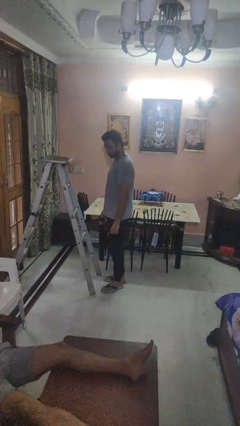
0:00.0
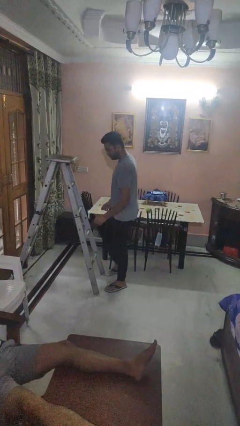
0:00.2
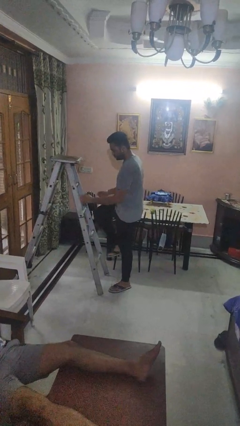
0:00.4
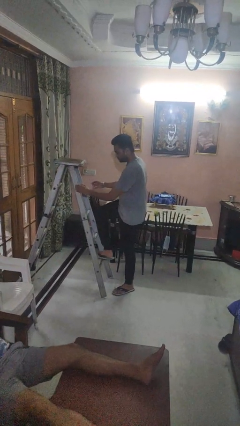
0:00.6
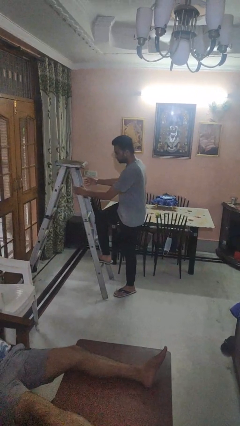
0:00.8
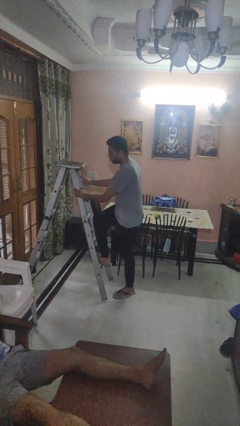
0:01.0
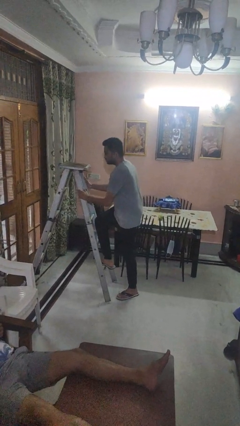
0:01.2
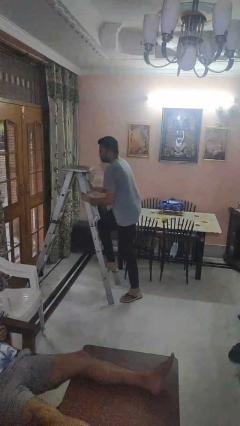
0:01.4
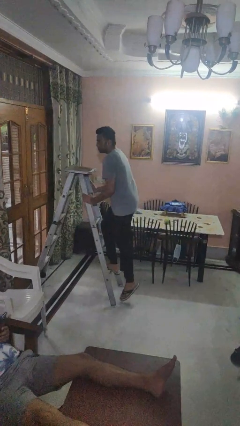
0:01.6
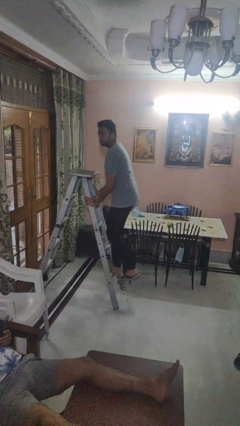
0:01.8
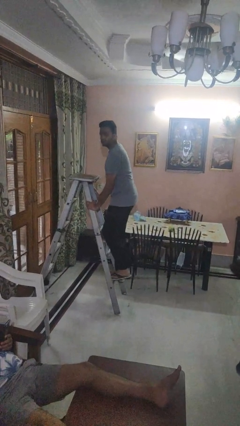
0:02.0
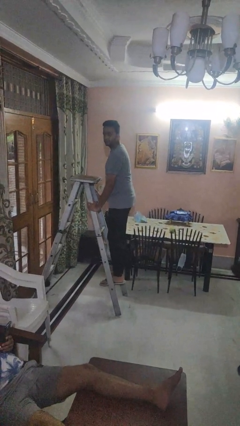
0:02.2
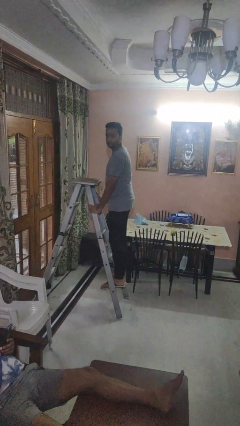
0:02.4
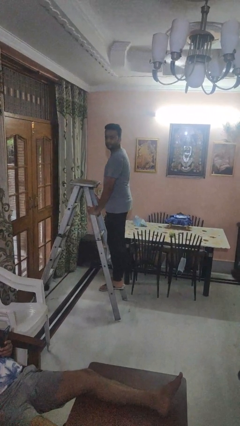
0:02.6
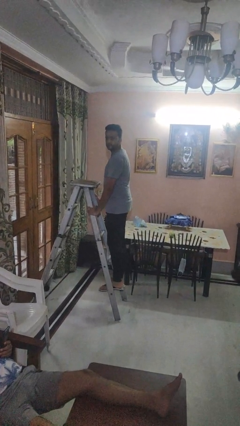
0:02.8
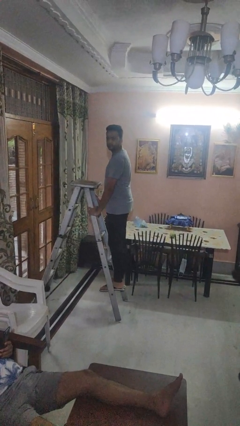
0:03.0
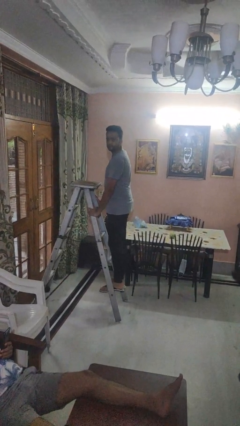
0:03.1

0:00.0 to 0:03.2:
person climbs up ladder

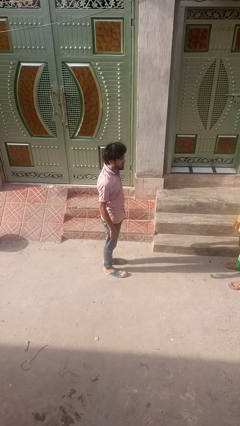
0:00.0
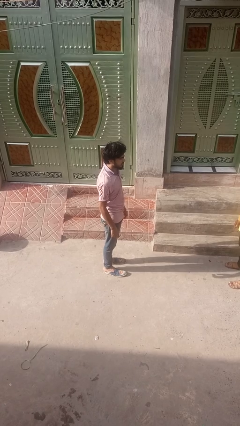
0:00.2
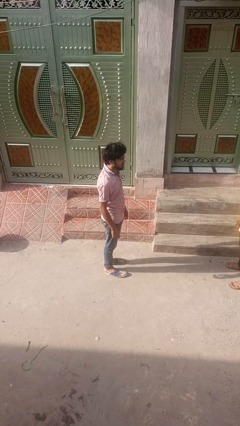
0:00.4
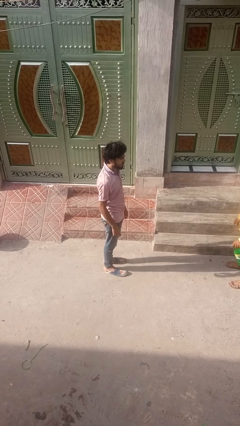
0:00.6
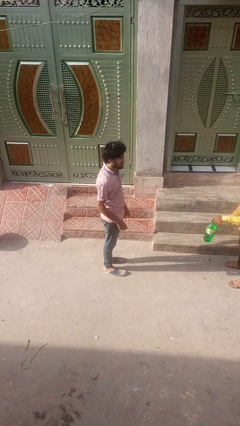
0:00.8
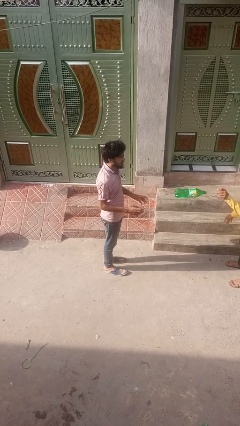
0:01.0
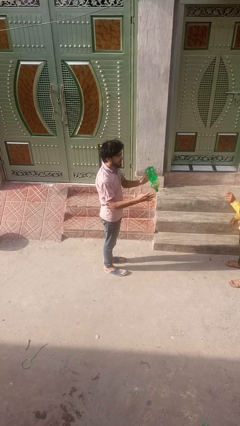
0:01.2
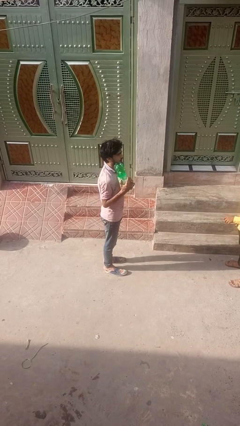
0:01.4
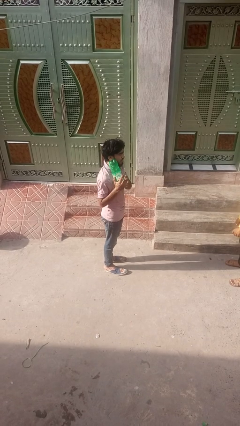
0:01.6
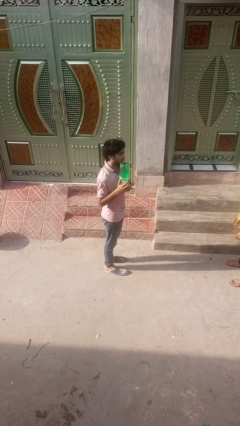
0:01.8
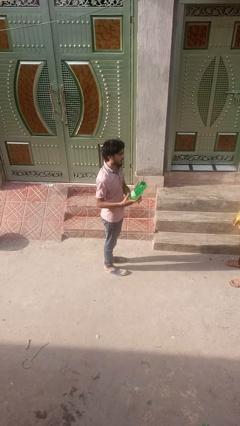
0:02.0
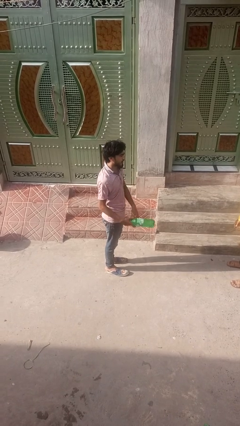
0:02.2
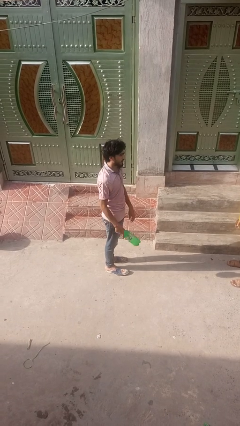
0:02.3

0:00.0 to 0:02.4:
person catches object from person

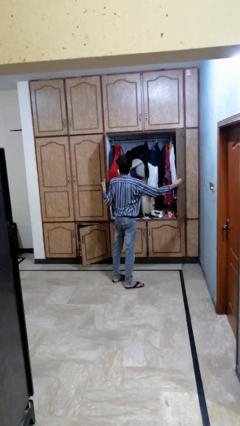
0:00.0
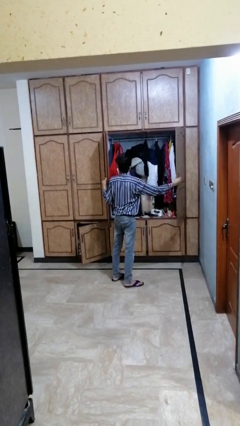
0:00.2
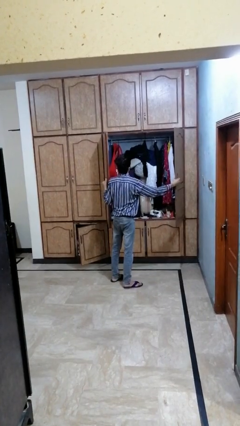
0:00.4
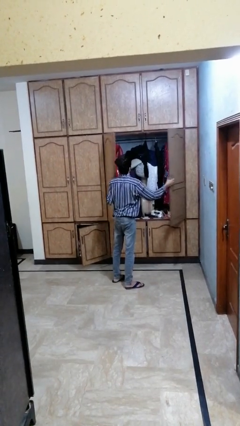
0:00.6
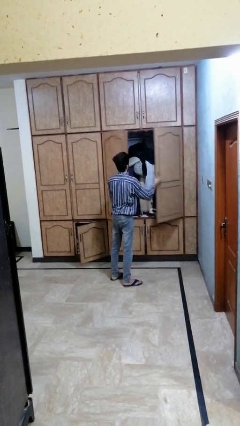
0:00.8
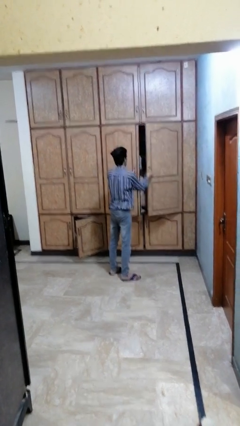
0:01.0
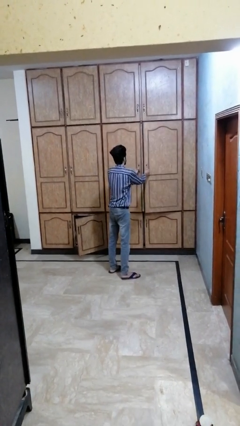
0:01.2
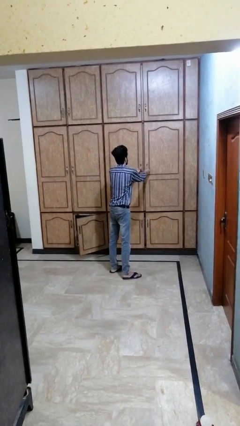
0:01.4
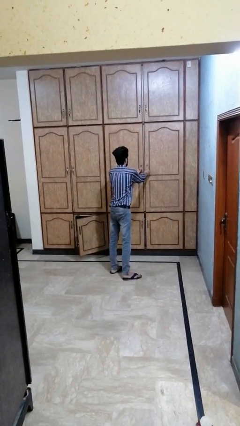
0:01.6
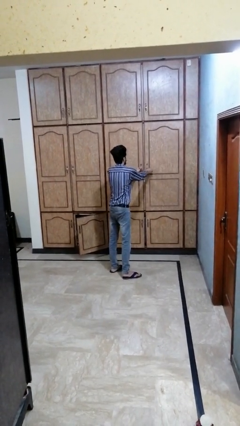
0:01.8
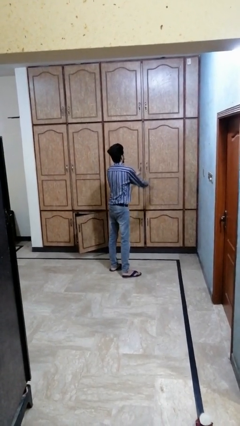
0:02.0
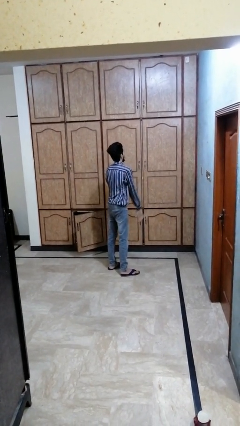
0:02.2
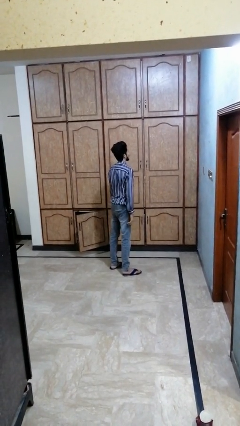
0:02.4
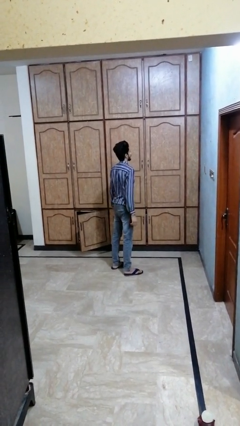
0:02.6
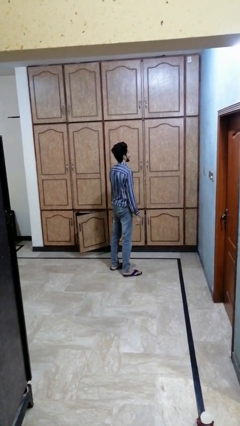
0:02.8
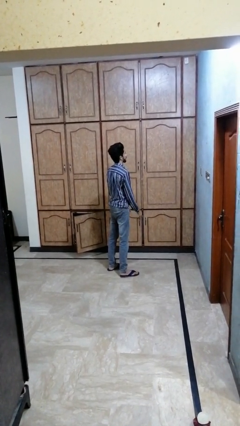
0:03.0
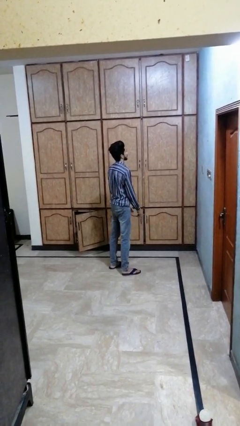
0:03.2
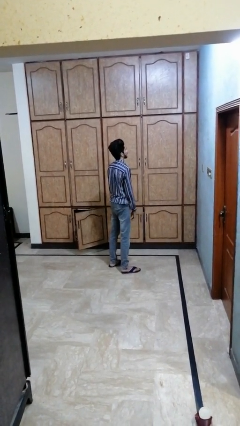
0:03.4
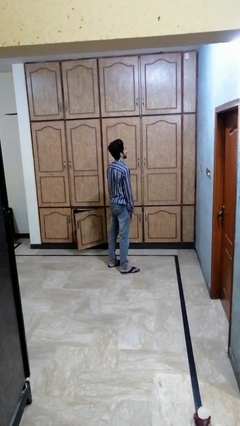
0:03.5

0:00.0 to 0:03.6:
person closes dresser drawer

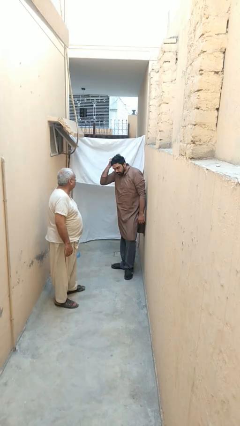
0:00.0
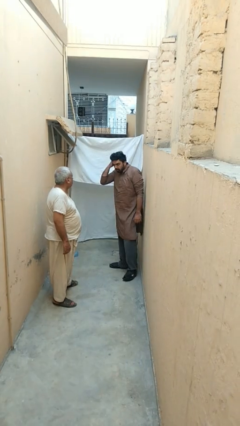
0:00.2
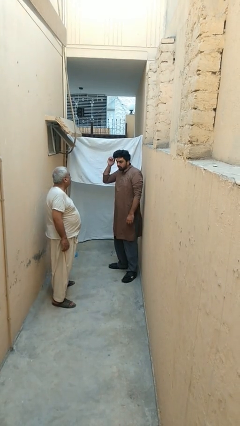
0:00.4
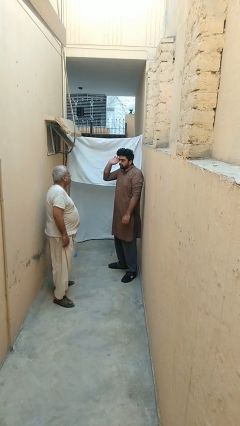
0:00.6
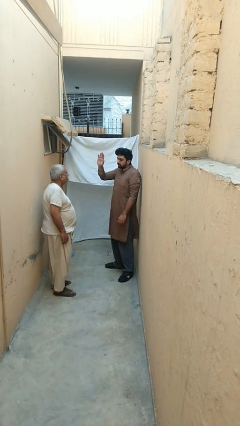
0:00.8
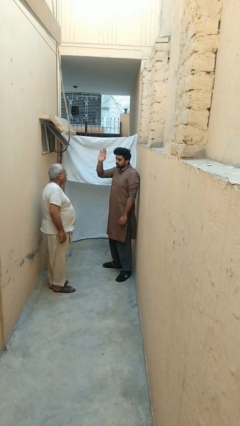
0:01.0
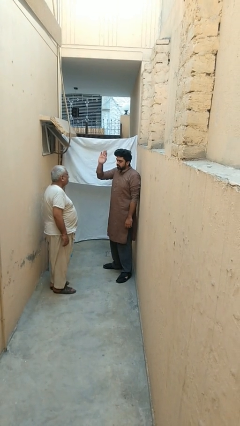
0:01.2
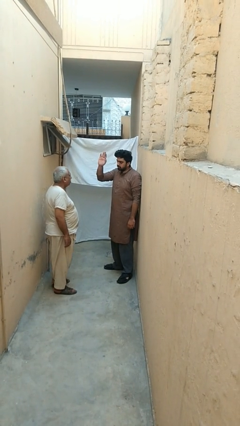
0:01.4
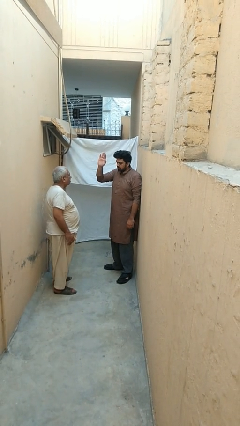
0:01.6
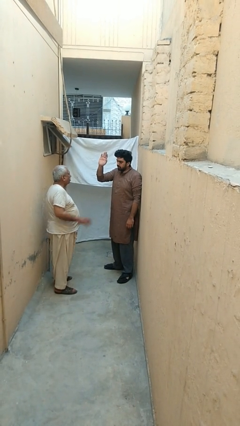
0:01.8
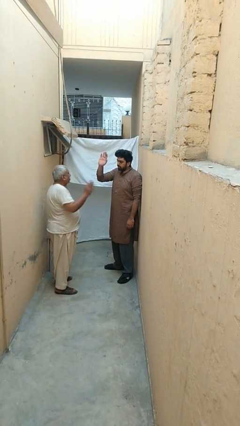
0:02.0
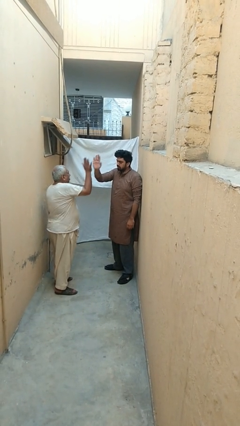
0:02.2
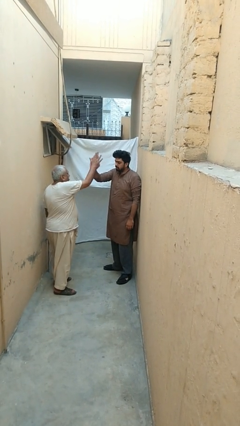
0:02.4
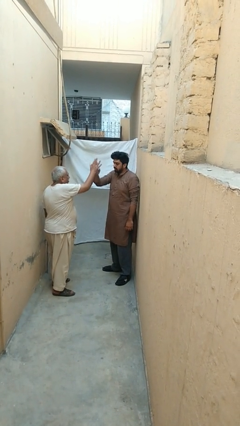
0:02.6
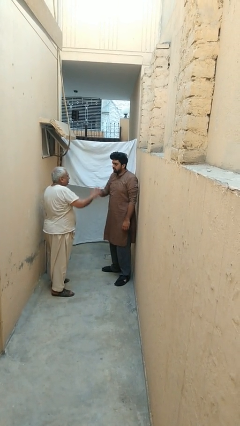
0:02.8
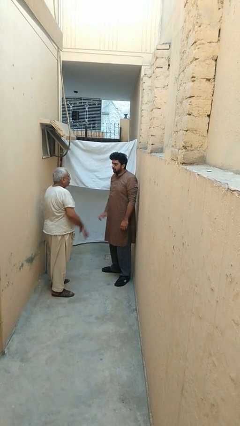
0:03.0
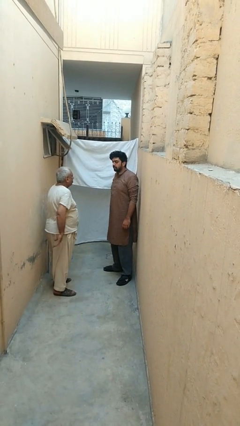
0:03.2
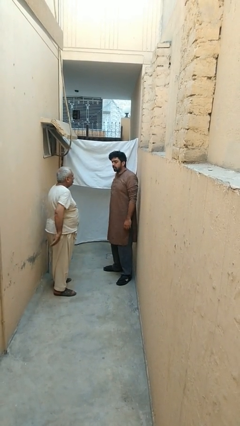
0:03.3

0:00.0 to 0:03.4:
person highfives hand

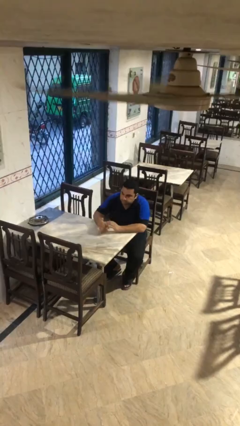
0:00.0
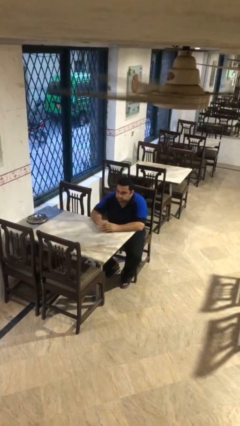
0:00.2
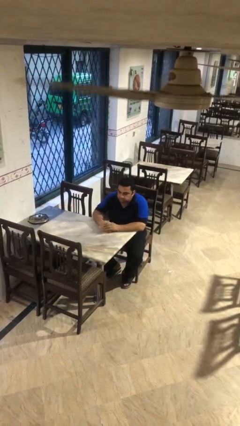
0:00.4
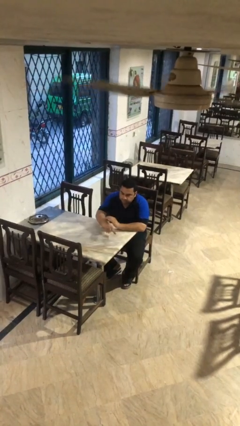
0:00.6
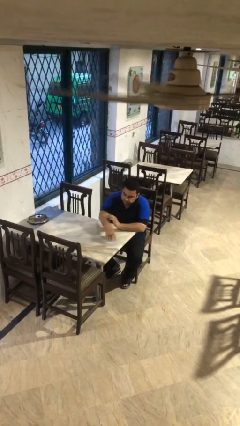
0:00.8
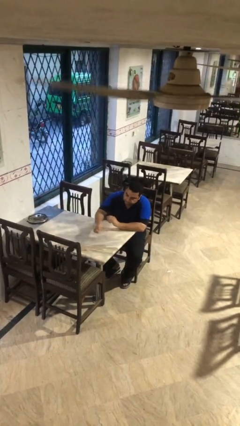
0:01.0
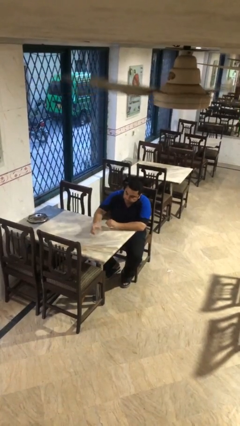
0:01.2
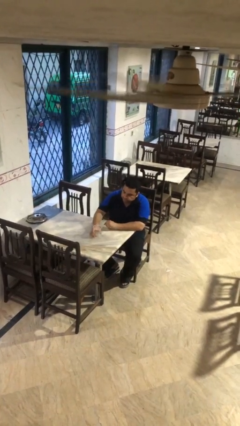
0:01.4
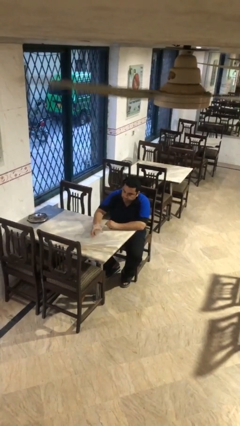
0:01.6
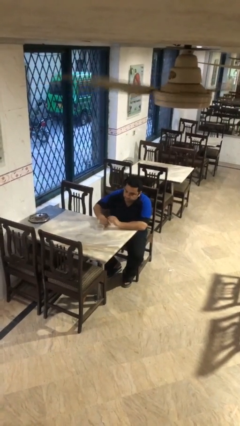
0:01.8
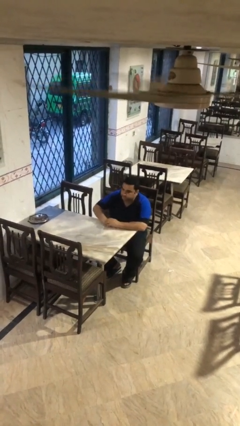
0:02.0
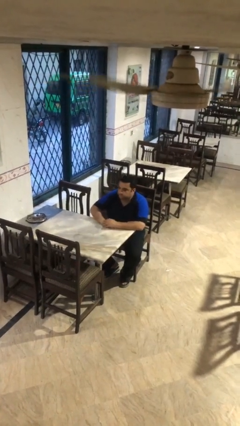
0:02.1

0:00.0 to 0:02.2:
person sets upright glass

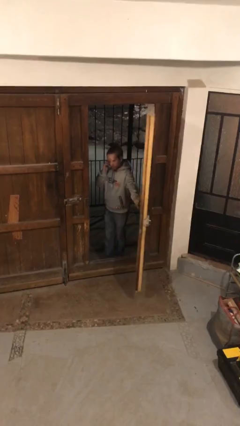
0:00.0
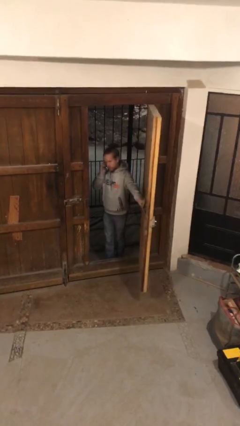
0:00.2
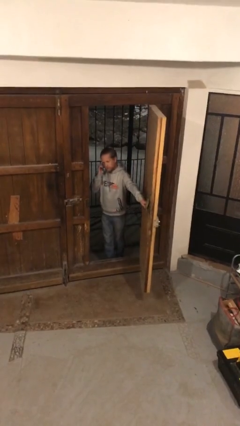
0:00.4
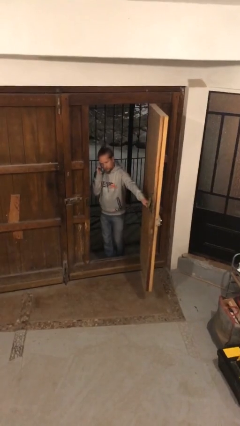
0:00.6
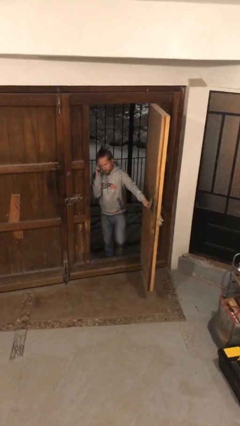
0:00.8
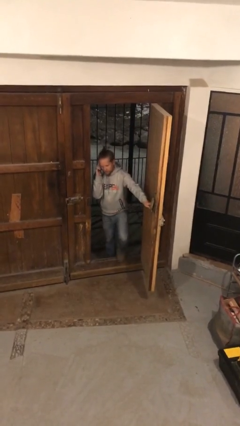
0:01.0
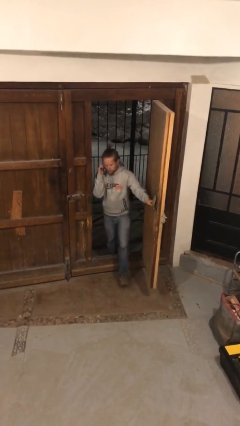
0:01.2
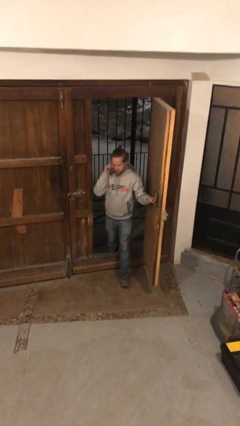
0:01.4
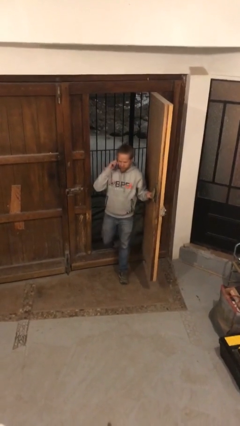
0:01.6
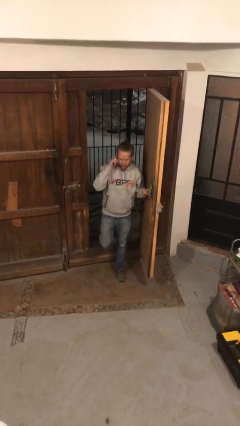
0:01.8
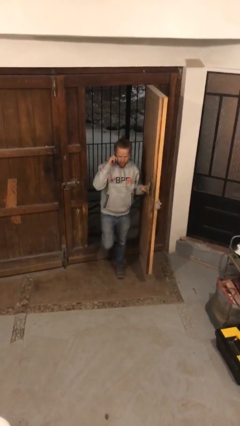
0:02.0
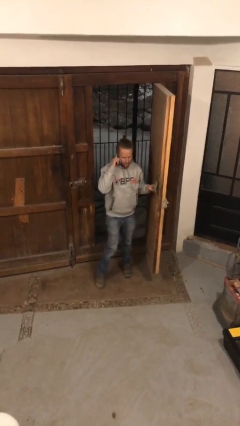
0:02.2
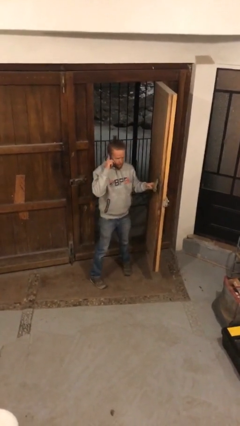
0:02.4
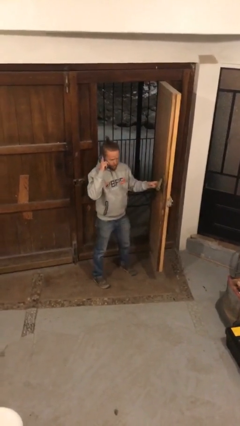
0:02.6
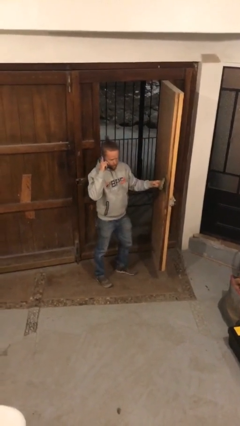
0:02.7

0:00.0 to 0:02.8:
person enters scene through structure
